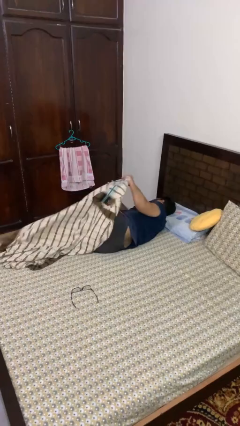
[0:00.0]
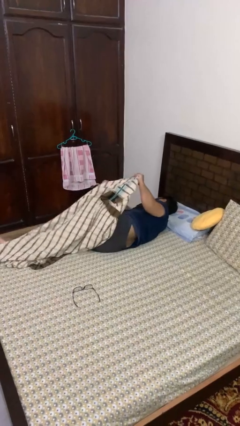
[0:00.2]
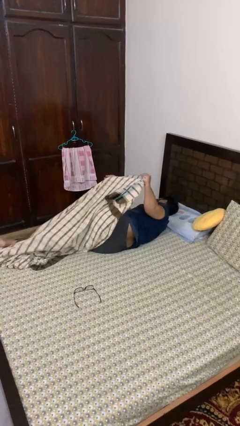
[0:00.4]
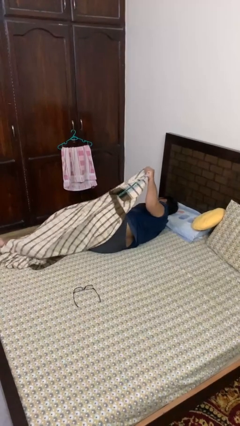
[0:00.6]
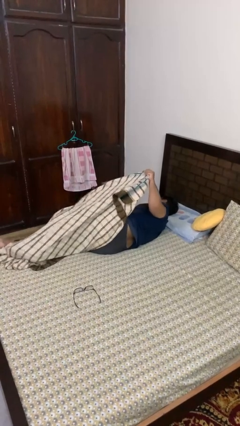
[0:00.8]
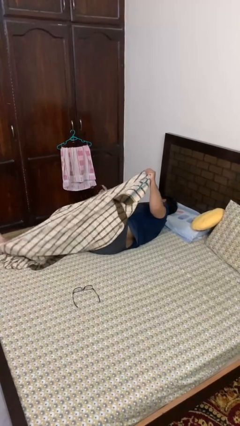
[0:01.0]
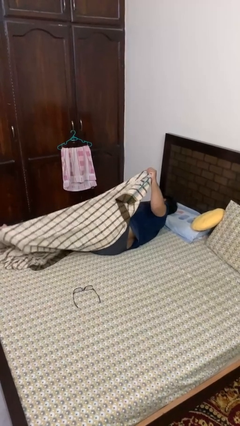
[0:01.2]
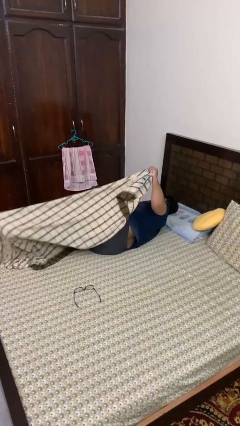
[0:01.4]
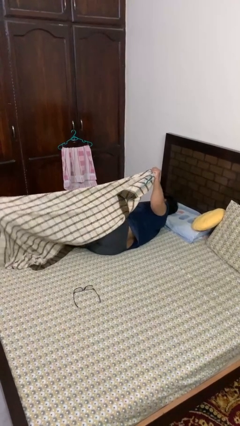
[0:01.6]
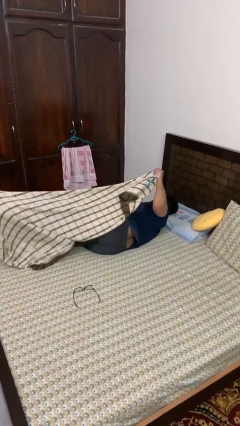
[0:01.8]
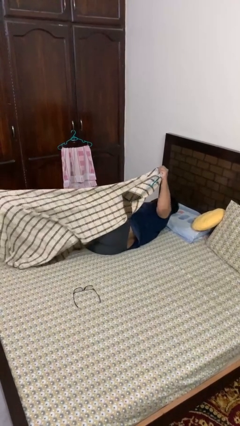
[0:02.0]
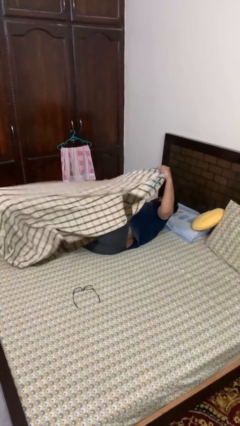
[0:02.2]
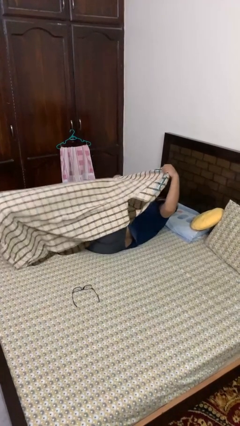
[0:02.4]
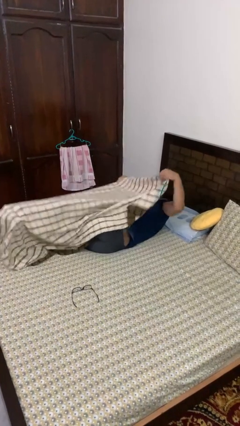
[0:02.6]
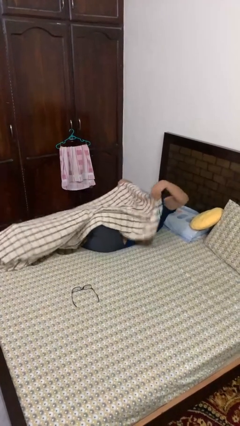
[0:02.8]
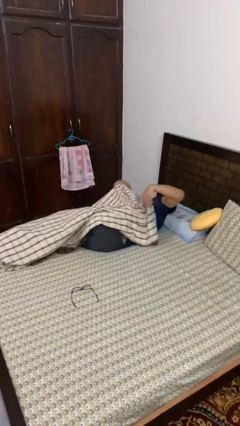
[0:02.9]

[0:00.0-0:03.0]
person covers with bedsheets

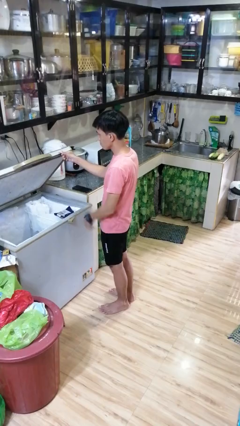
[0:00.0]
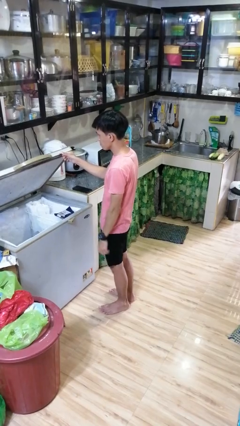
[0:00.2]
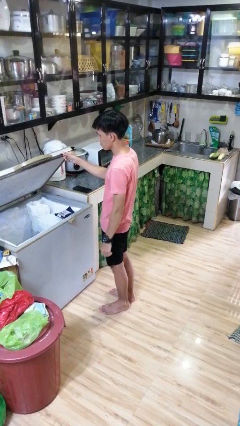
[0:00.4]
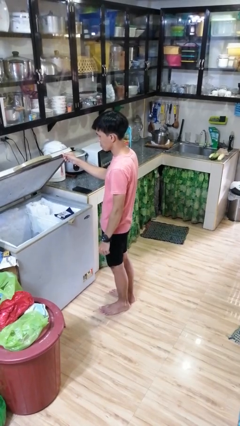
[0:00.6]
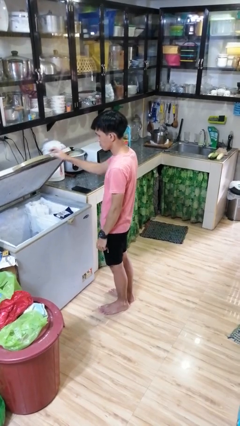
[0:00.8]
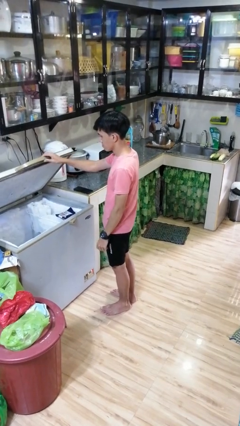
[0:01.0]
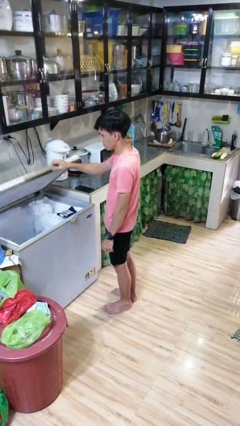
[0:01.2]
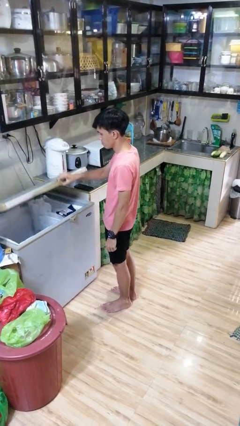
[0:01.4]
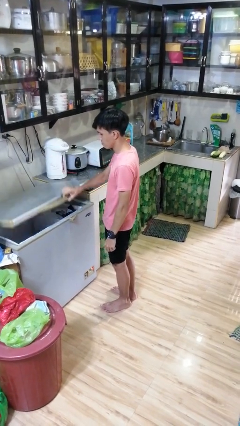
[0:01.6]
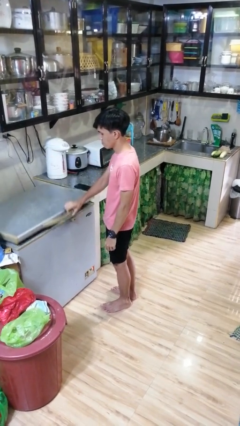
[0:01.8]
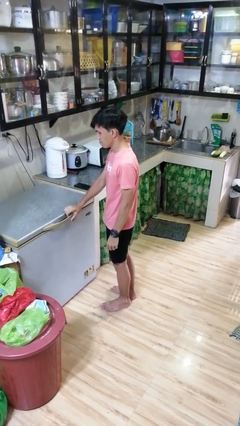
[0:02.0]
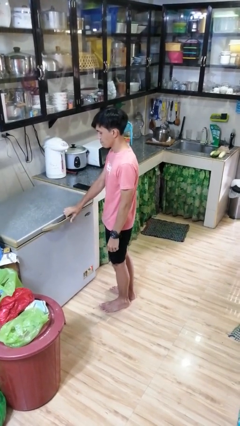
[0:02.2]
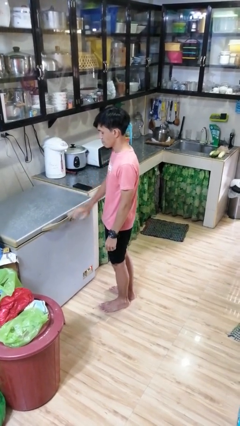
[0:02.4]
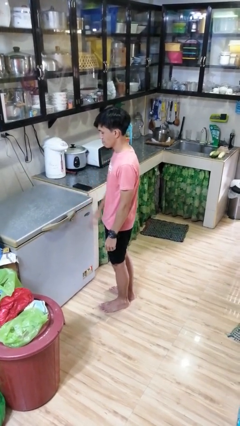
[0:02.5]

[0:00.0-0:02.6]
person closes refrigerator

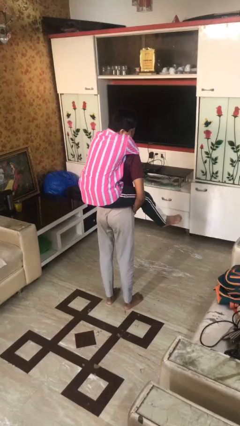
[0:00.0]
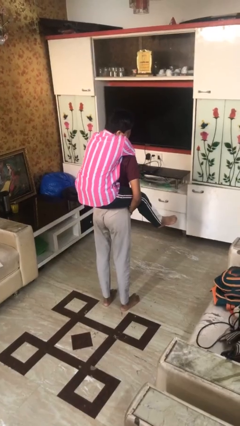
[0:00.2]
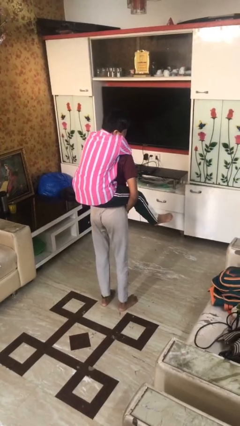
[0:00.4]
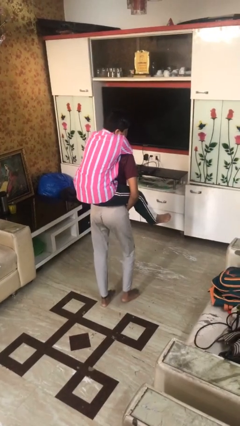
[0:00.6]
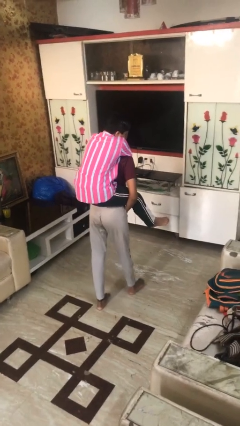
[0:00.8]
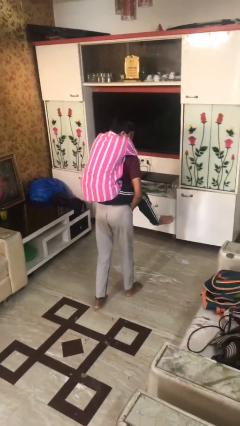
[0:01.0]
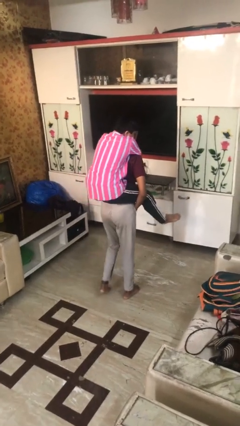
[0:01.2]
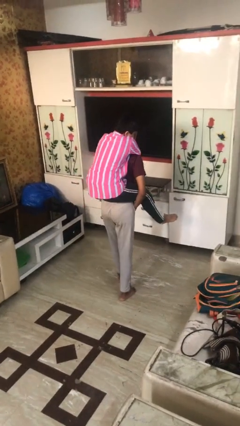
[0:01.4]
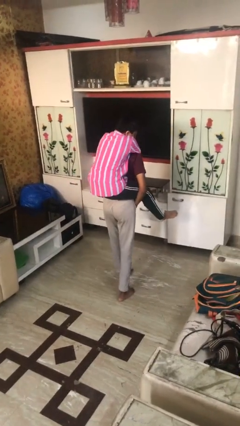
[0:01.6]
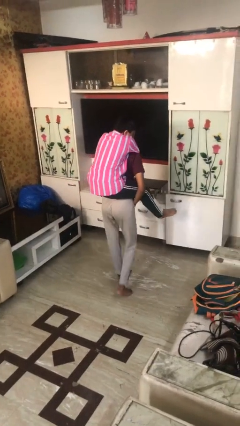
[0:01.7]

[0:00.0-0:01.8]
person carries person on back

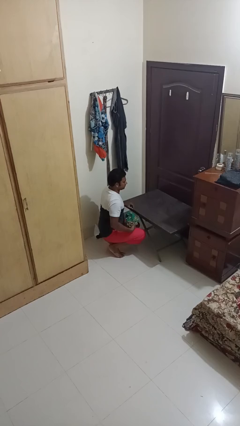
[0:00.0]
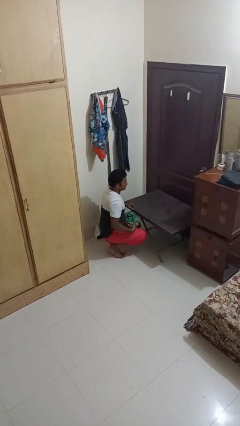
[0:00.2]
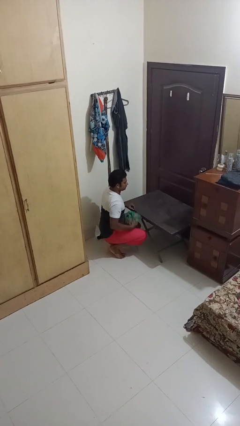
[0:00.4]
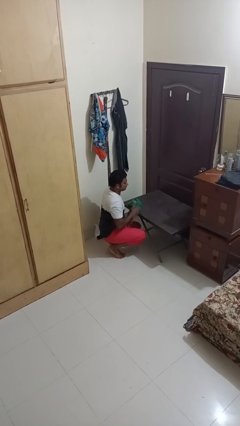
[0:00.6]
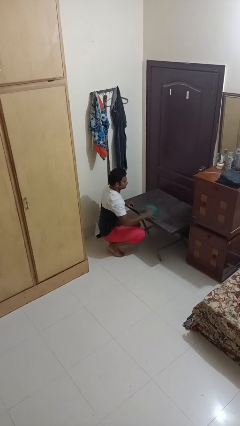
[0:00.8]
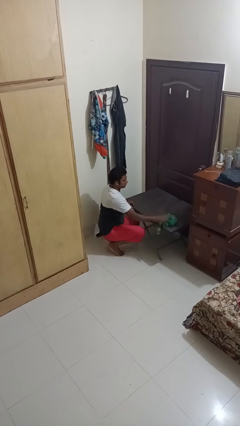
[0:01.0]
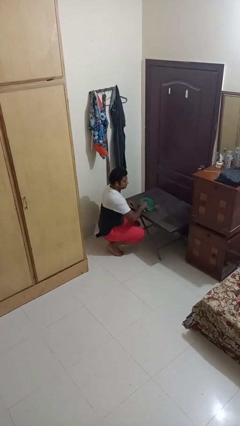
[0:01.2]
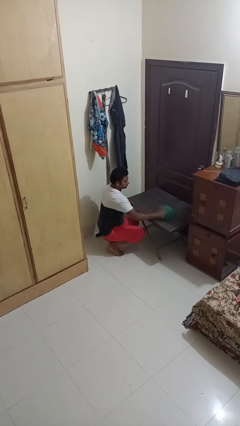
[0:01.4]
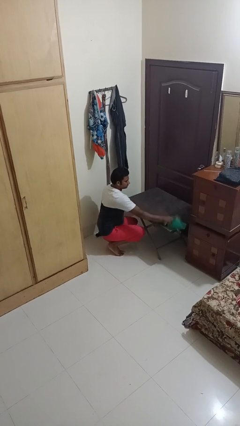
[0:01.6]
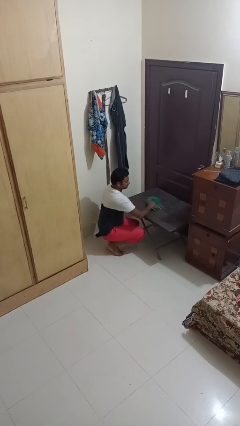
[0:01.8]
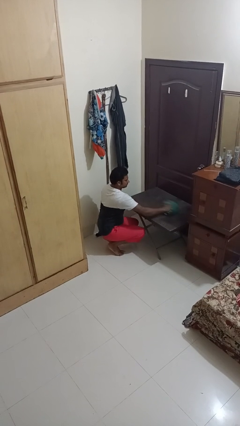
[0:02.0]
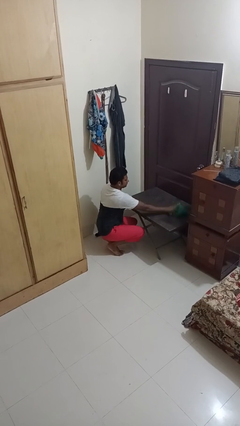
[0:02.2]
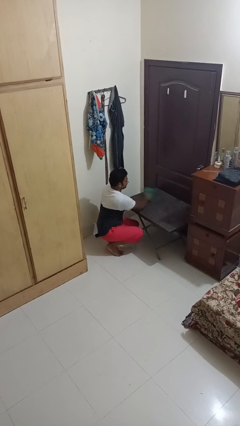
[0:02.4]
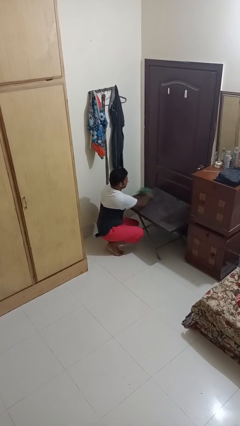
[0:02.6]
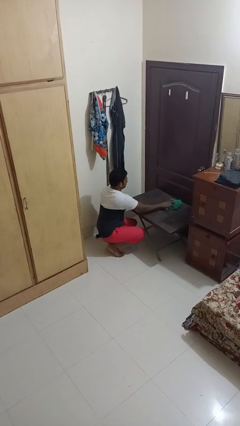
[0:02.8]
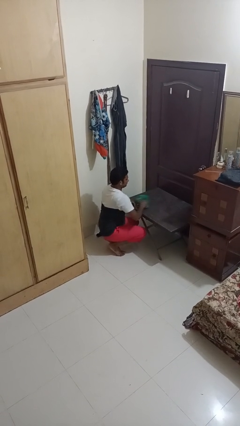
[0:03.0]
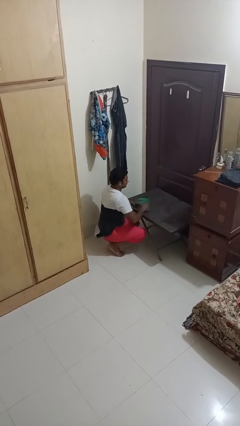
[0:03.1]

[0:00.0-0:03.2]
person cleans table with rag

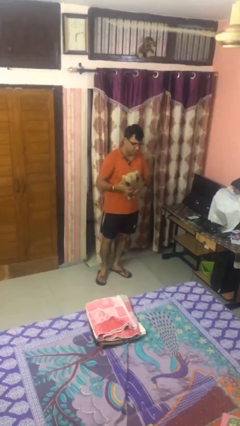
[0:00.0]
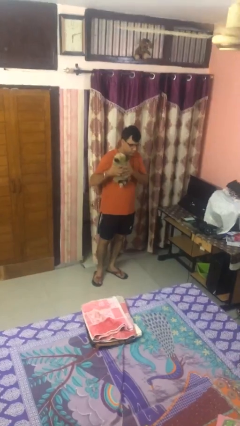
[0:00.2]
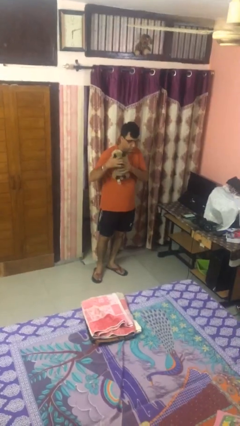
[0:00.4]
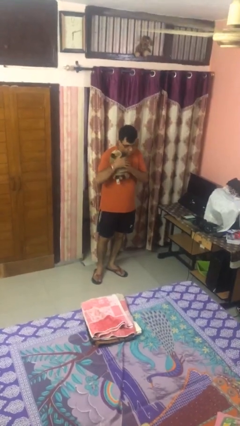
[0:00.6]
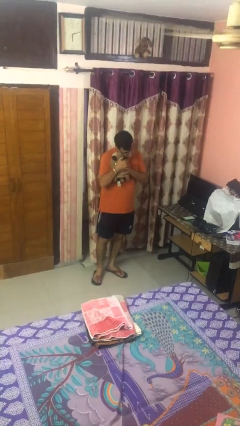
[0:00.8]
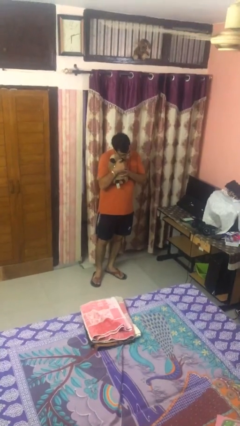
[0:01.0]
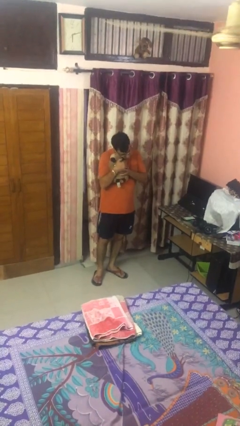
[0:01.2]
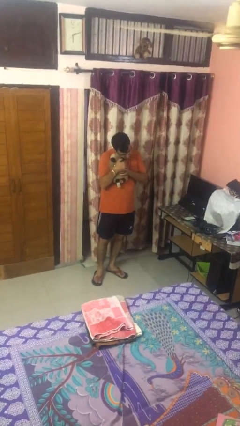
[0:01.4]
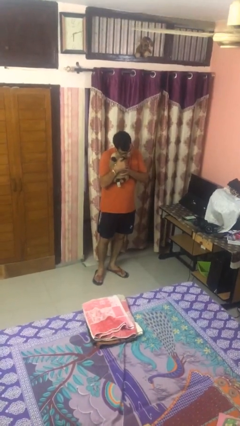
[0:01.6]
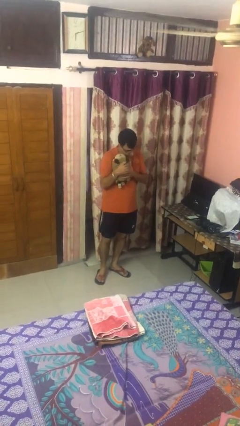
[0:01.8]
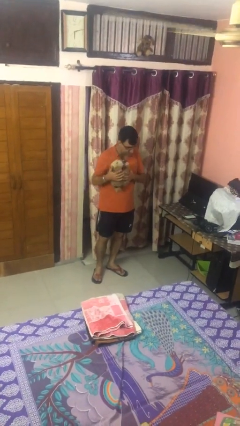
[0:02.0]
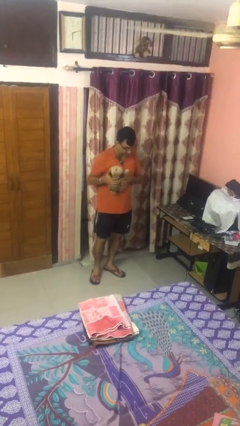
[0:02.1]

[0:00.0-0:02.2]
person hugs stuffed animal

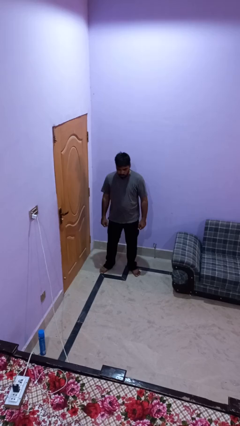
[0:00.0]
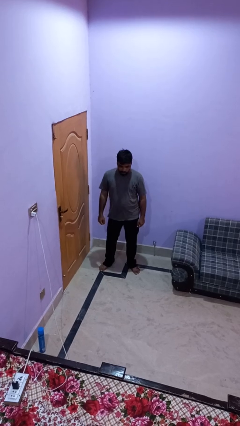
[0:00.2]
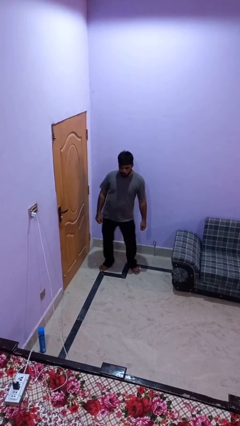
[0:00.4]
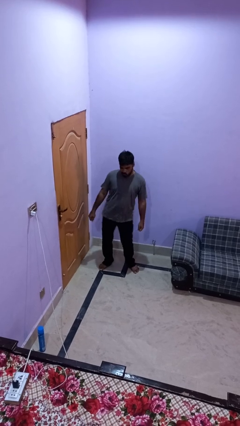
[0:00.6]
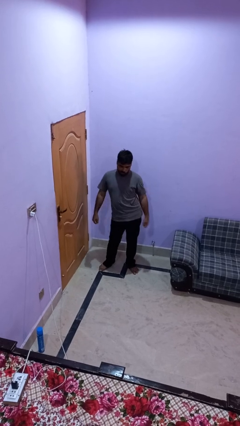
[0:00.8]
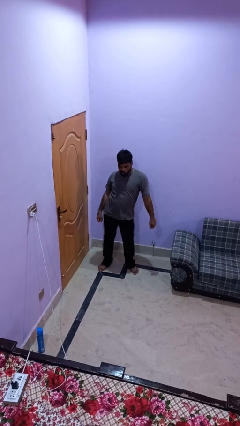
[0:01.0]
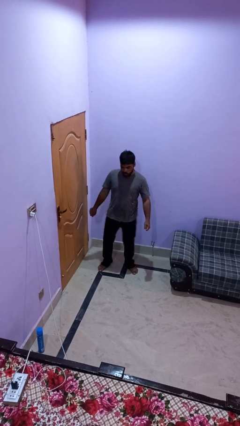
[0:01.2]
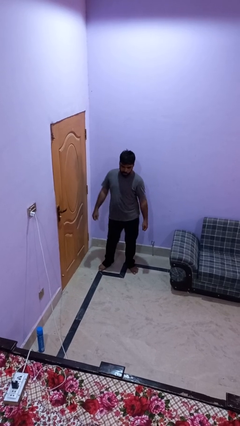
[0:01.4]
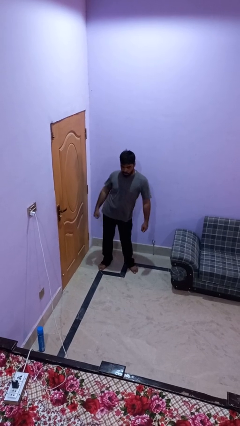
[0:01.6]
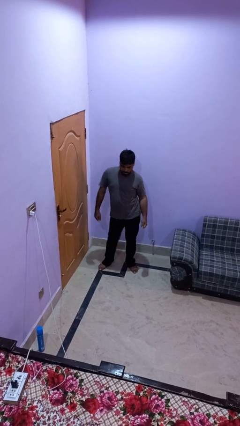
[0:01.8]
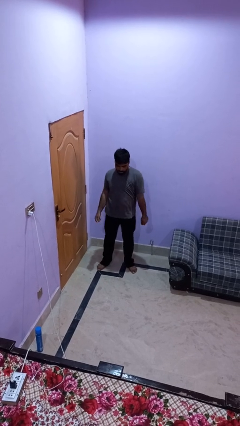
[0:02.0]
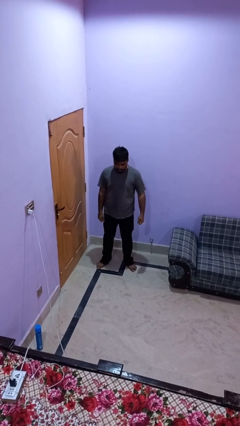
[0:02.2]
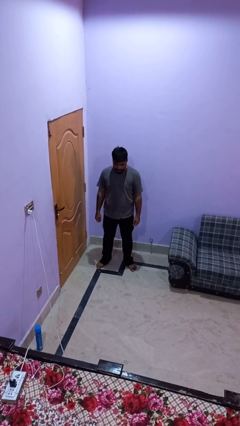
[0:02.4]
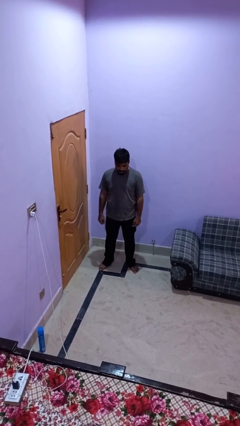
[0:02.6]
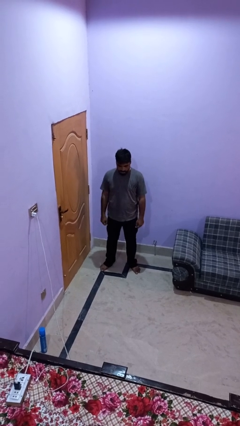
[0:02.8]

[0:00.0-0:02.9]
person wiggles hips

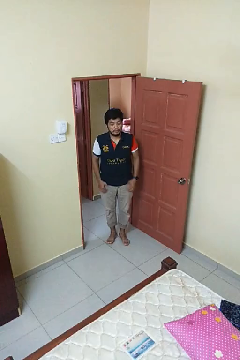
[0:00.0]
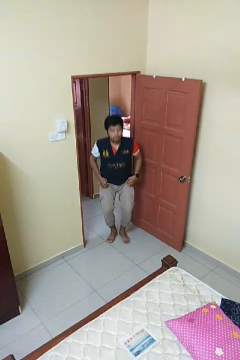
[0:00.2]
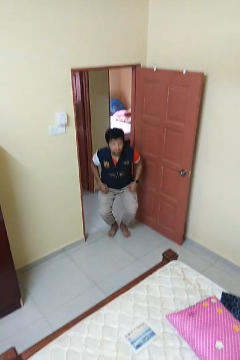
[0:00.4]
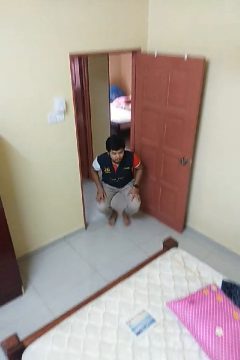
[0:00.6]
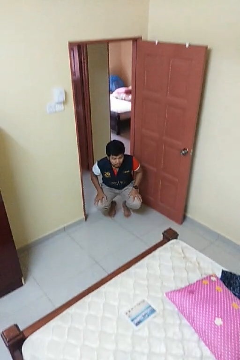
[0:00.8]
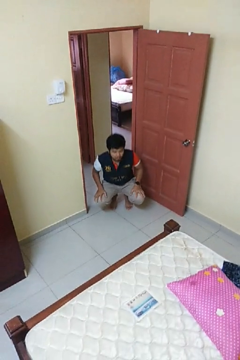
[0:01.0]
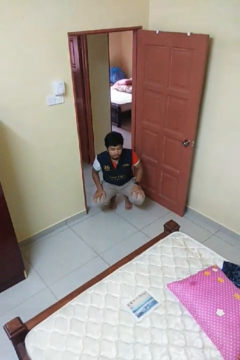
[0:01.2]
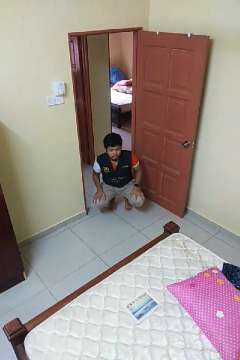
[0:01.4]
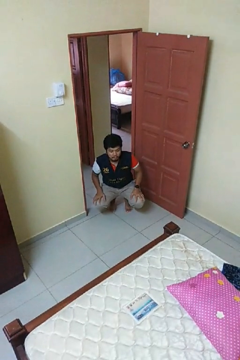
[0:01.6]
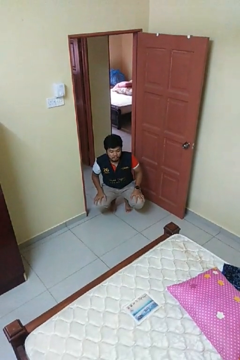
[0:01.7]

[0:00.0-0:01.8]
person squats

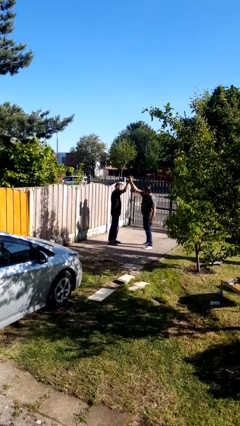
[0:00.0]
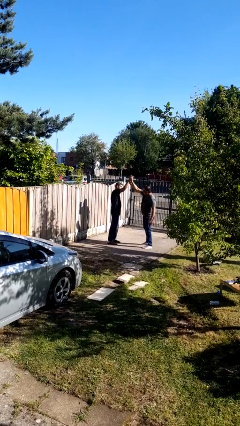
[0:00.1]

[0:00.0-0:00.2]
person highfives hand
